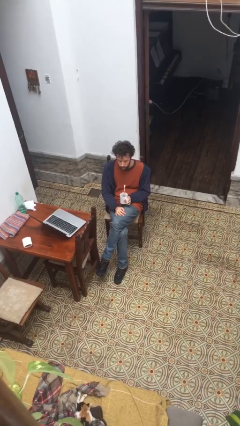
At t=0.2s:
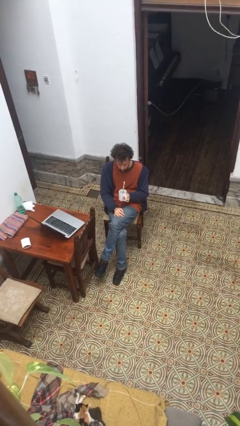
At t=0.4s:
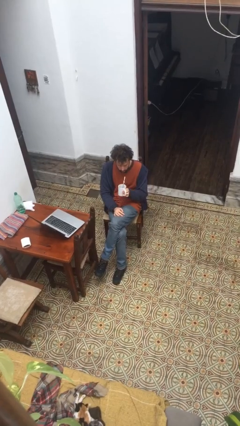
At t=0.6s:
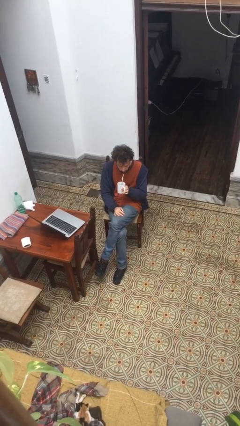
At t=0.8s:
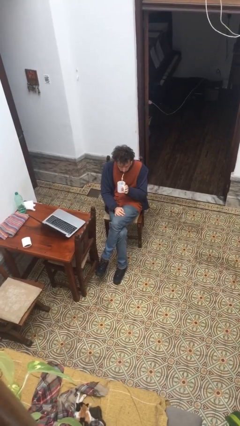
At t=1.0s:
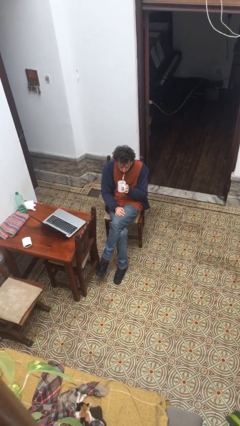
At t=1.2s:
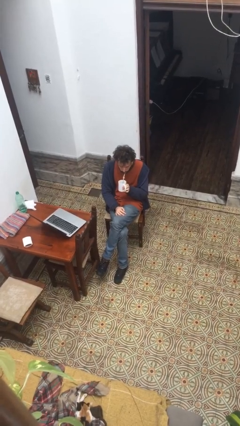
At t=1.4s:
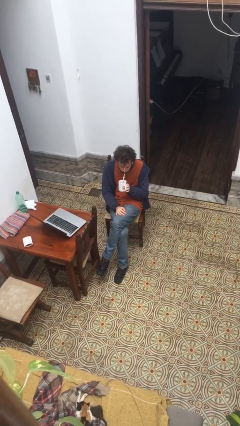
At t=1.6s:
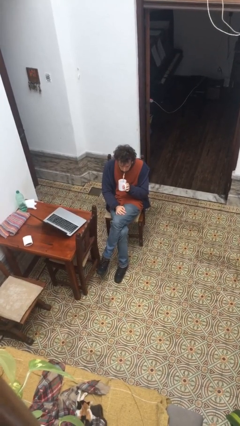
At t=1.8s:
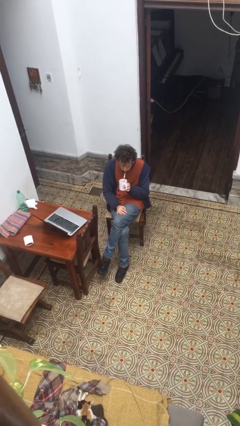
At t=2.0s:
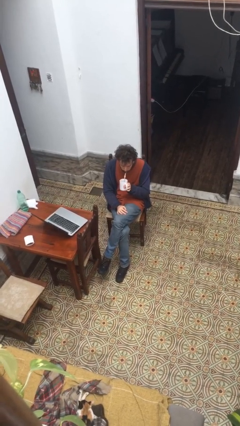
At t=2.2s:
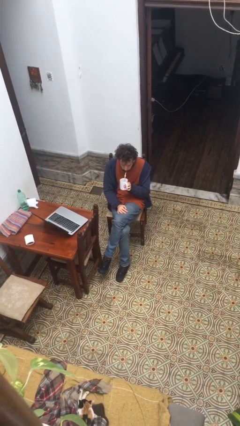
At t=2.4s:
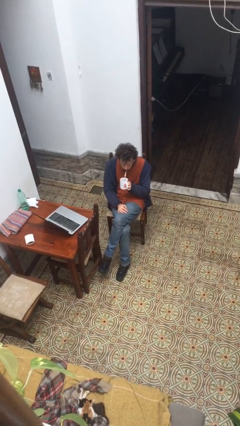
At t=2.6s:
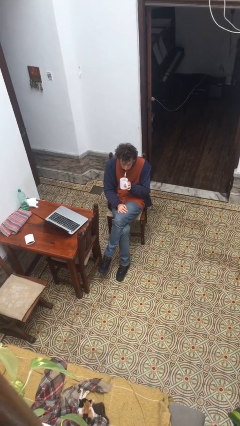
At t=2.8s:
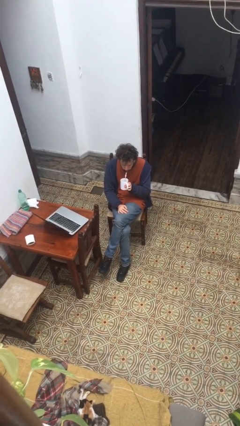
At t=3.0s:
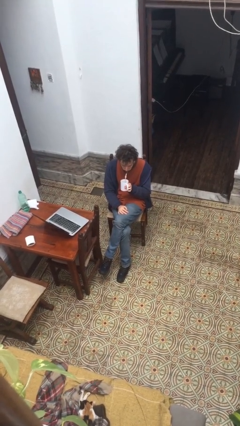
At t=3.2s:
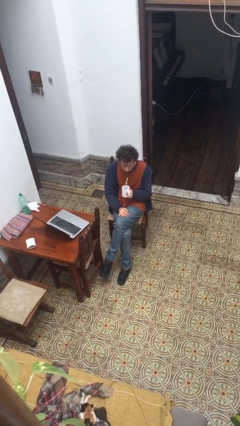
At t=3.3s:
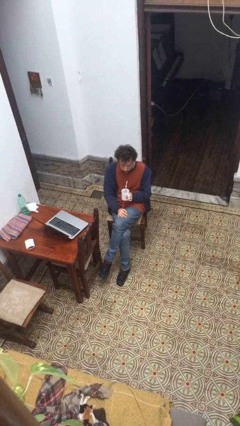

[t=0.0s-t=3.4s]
person drinks from straw

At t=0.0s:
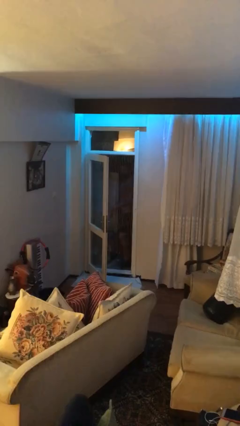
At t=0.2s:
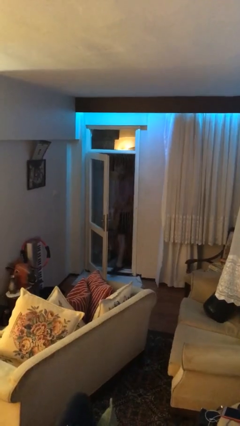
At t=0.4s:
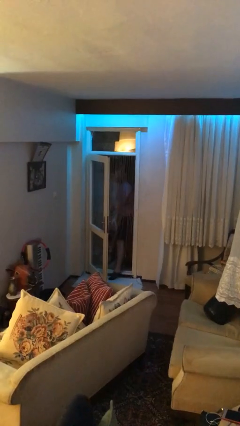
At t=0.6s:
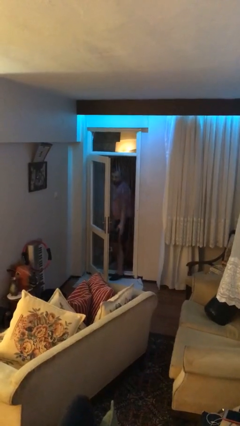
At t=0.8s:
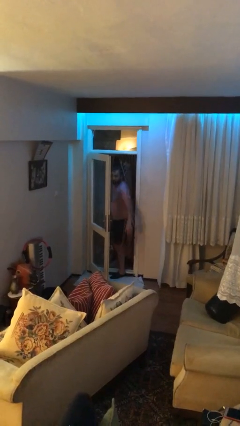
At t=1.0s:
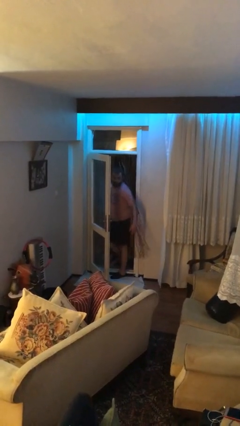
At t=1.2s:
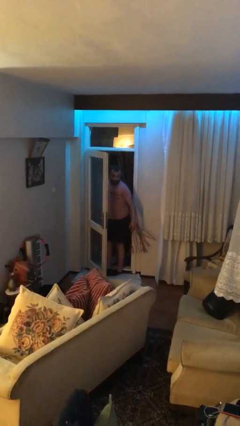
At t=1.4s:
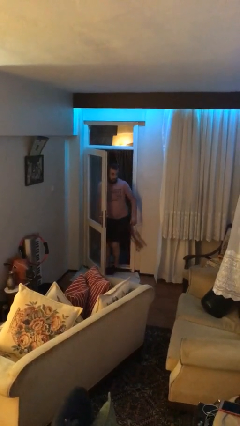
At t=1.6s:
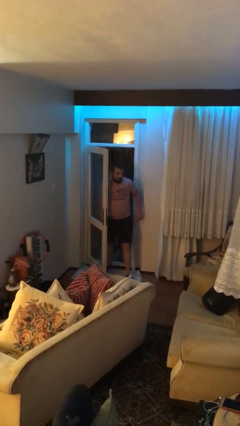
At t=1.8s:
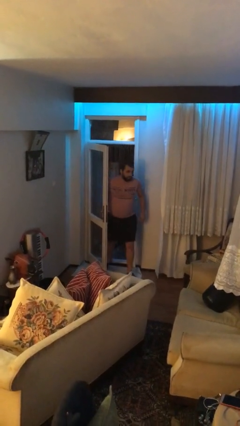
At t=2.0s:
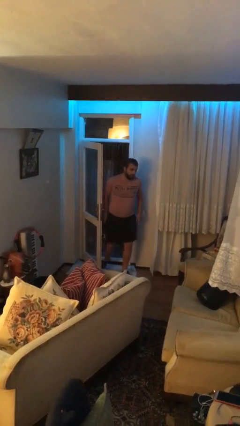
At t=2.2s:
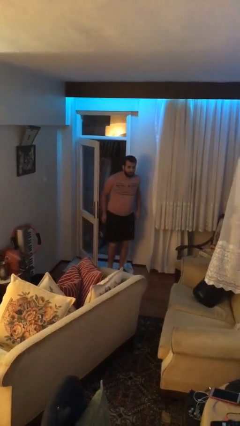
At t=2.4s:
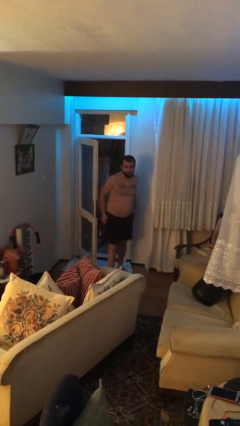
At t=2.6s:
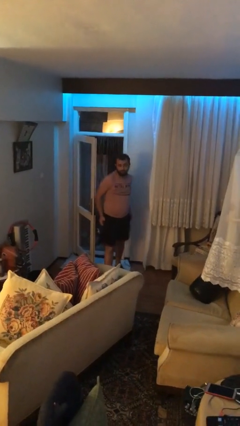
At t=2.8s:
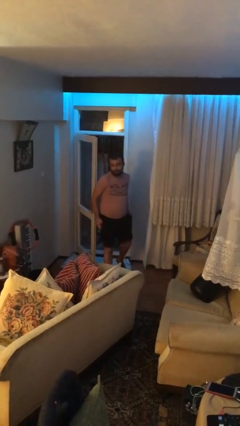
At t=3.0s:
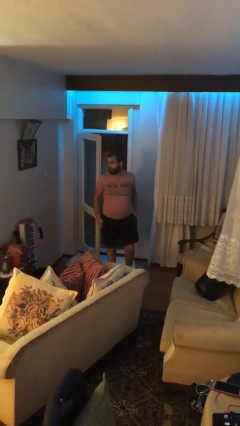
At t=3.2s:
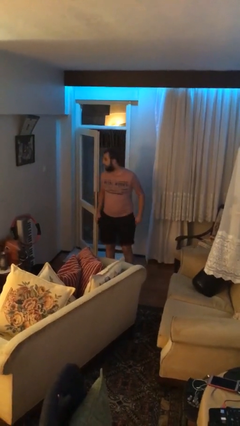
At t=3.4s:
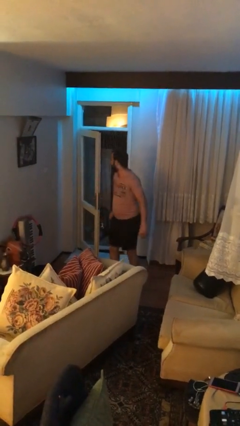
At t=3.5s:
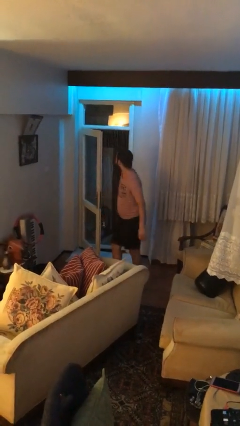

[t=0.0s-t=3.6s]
person enters scene through structure

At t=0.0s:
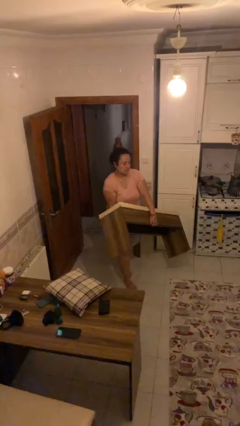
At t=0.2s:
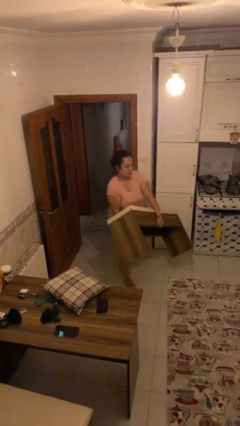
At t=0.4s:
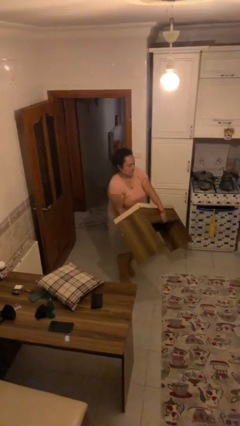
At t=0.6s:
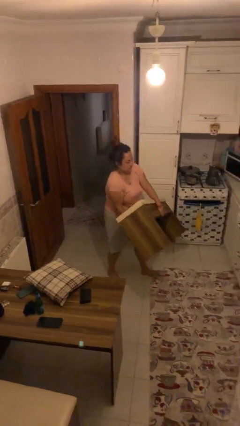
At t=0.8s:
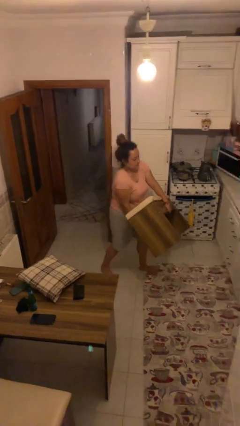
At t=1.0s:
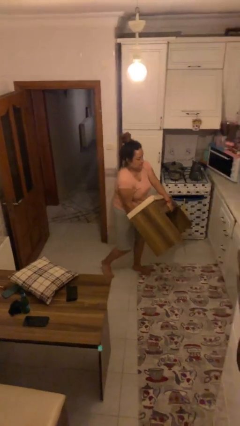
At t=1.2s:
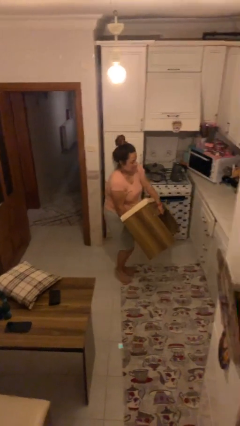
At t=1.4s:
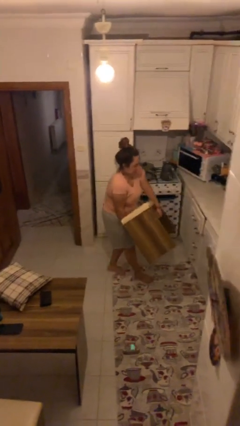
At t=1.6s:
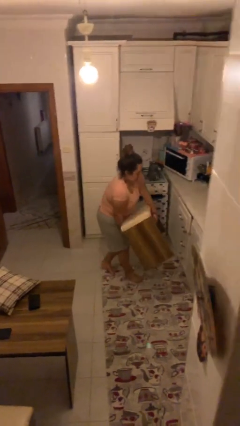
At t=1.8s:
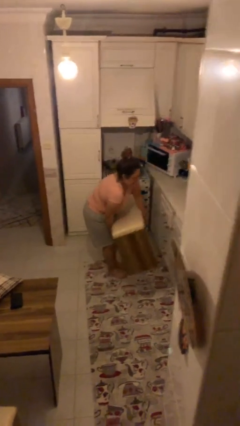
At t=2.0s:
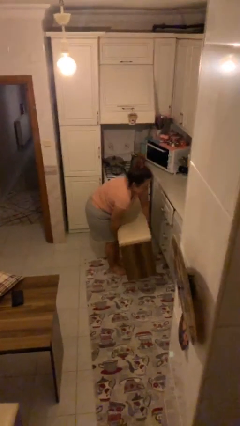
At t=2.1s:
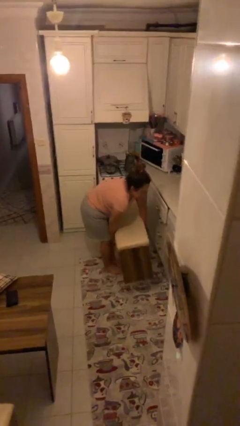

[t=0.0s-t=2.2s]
person carries heavy object

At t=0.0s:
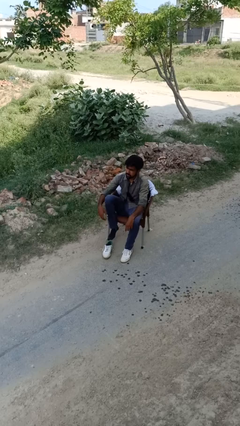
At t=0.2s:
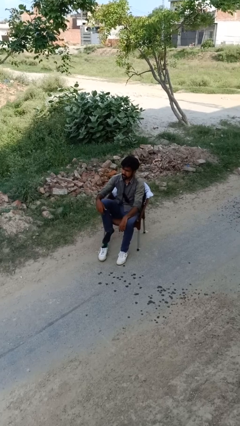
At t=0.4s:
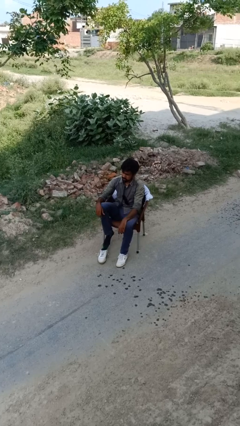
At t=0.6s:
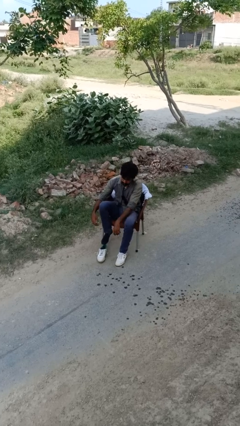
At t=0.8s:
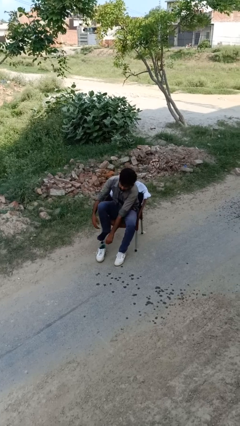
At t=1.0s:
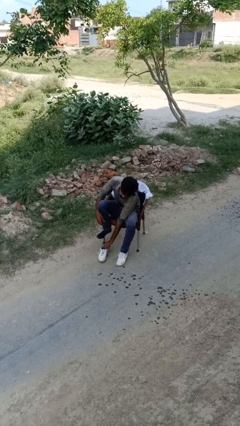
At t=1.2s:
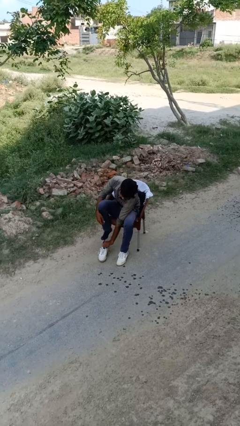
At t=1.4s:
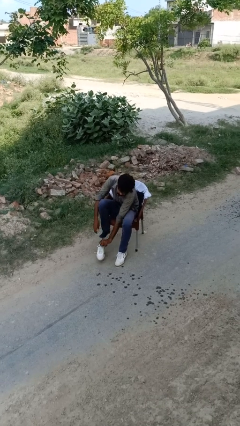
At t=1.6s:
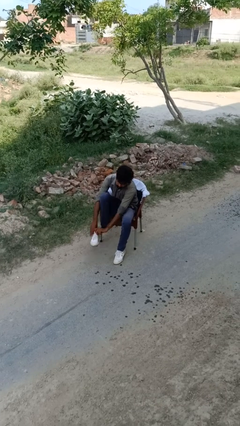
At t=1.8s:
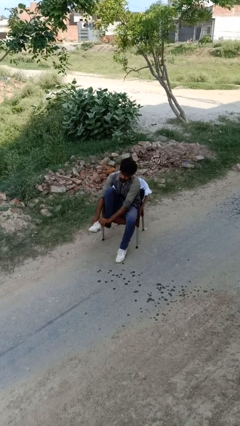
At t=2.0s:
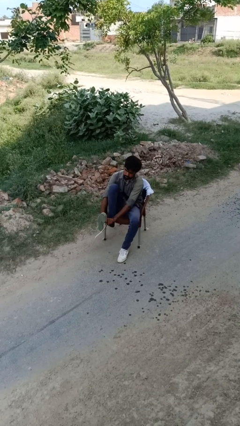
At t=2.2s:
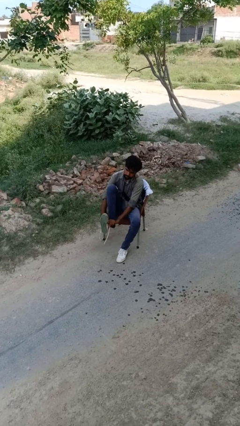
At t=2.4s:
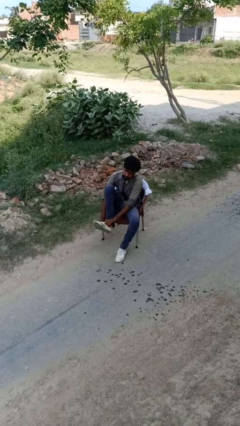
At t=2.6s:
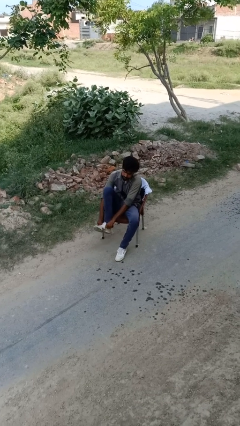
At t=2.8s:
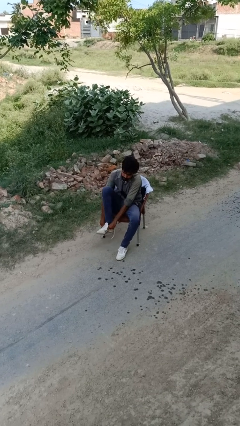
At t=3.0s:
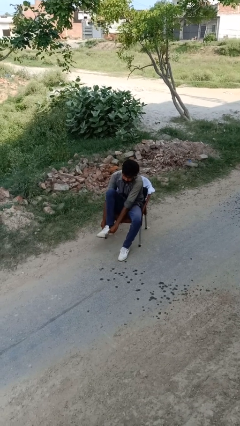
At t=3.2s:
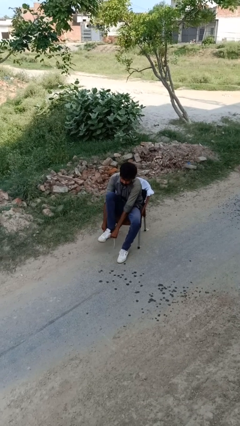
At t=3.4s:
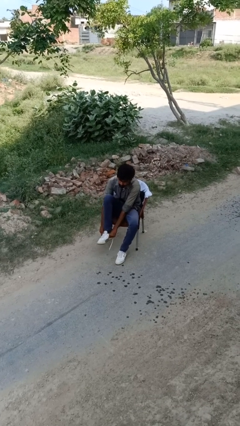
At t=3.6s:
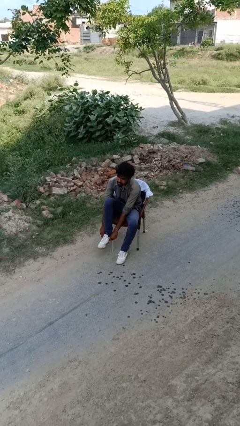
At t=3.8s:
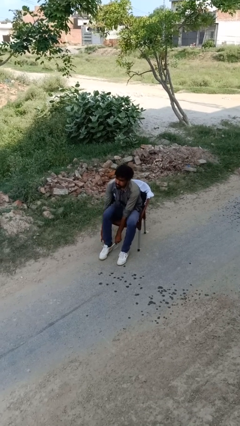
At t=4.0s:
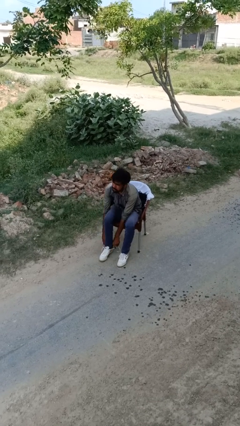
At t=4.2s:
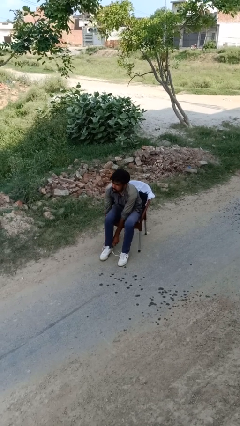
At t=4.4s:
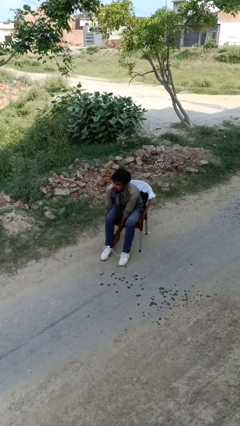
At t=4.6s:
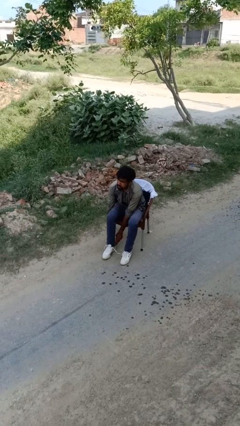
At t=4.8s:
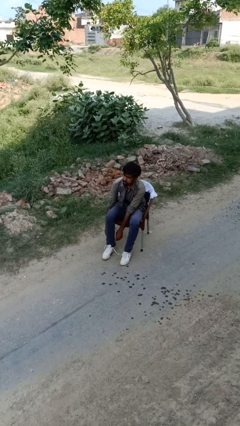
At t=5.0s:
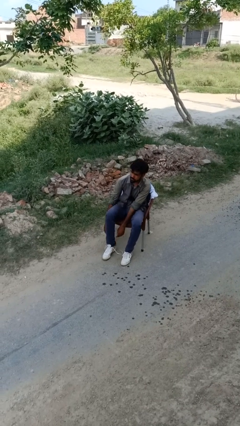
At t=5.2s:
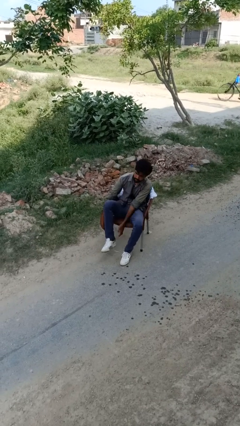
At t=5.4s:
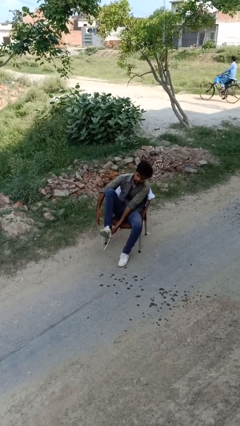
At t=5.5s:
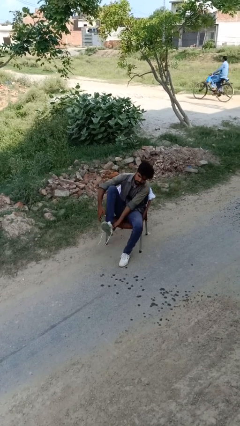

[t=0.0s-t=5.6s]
person puts on shoes

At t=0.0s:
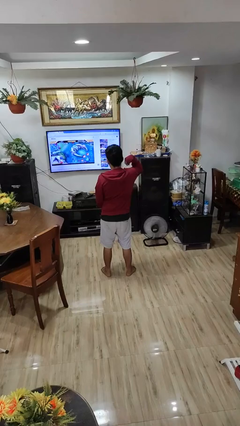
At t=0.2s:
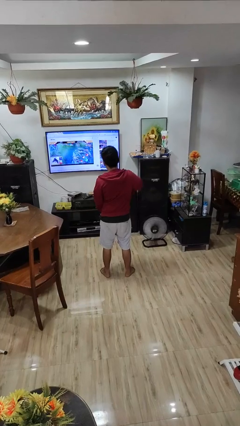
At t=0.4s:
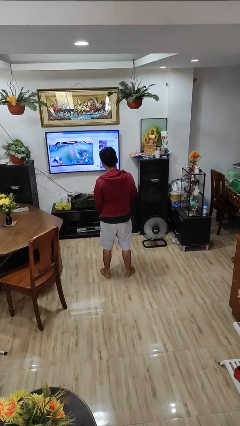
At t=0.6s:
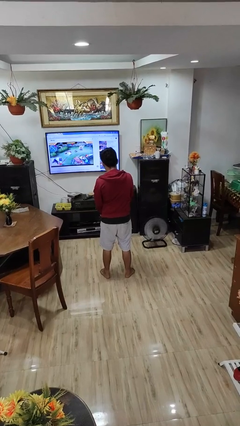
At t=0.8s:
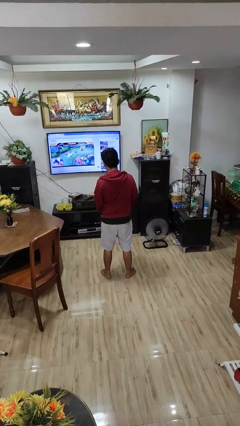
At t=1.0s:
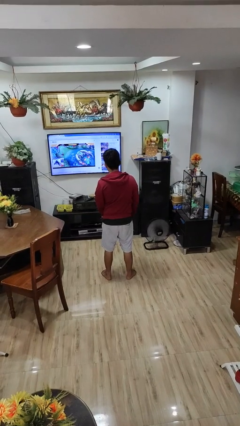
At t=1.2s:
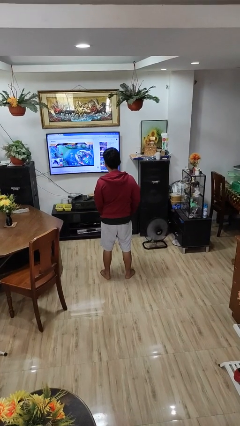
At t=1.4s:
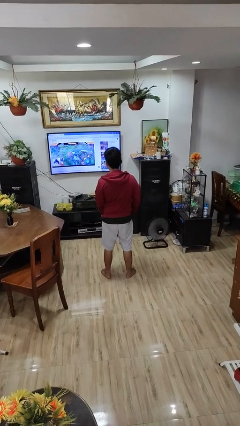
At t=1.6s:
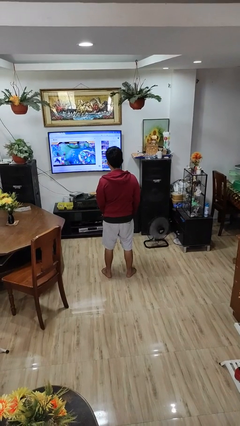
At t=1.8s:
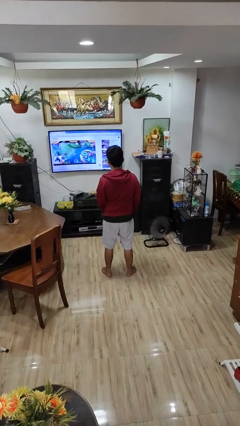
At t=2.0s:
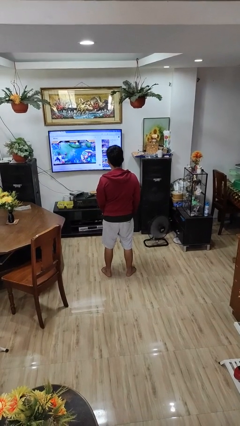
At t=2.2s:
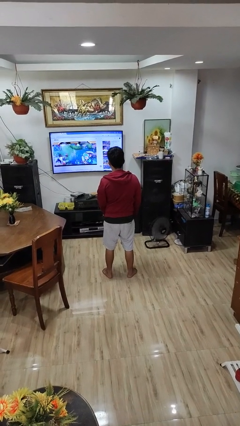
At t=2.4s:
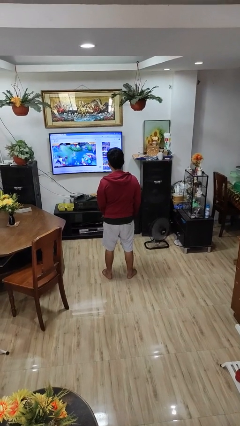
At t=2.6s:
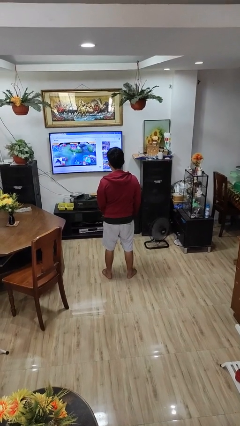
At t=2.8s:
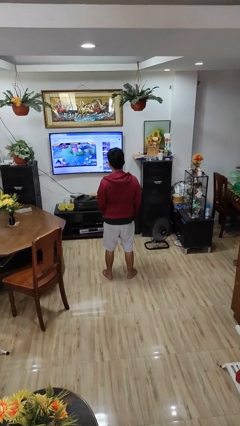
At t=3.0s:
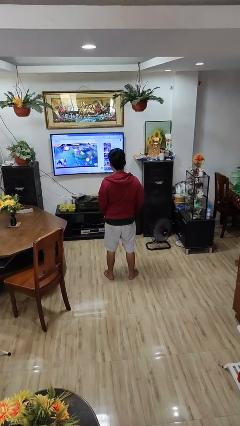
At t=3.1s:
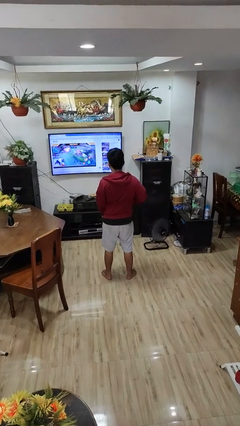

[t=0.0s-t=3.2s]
person unzips jacket
